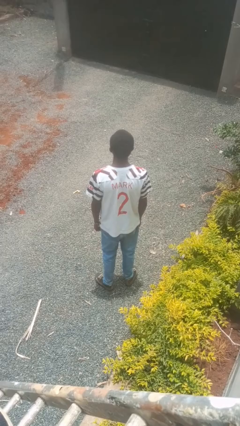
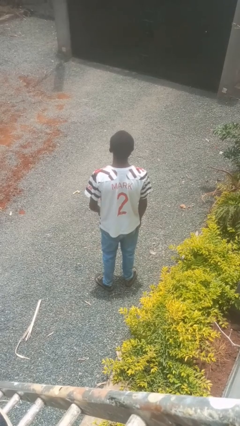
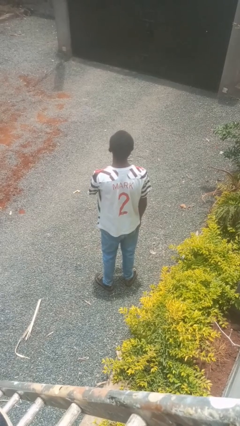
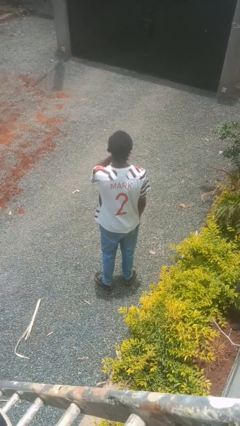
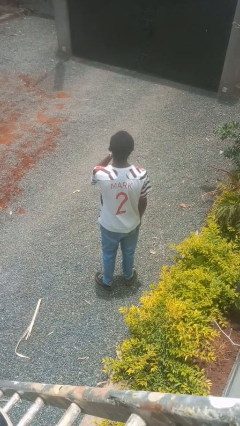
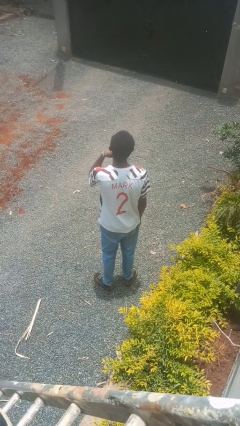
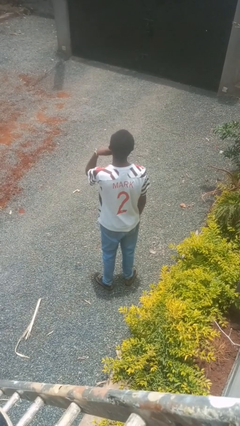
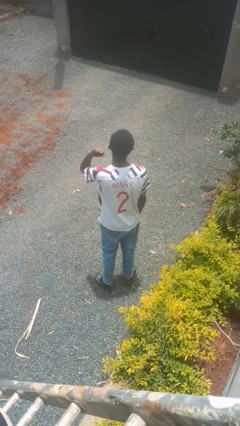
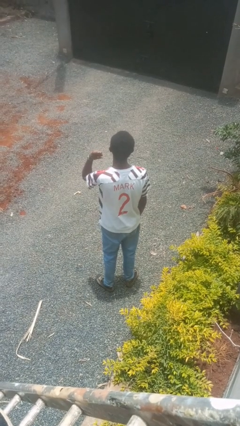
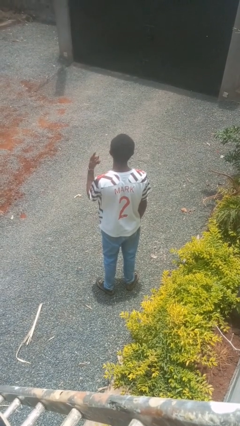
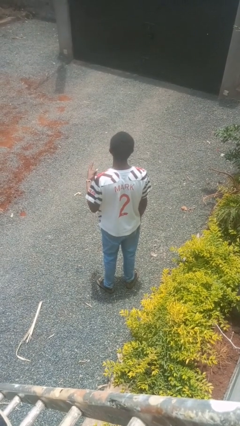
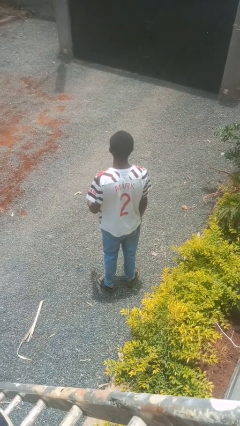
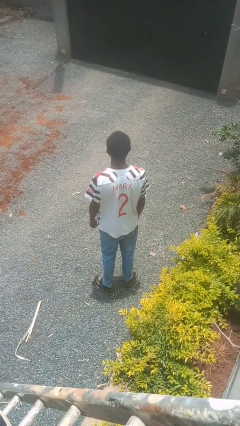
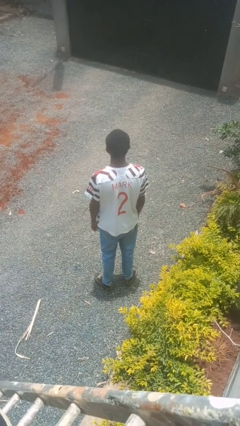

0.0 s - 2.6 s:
person gestures cut

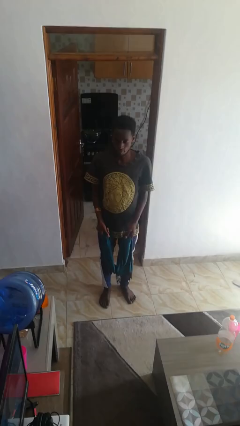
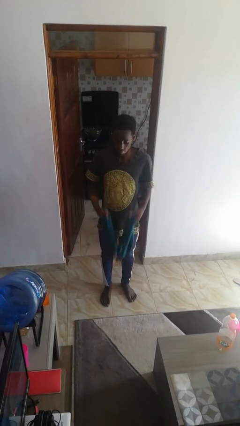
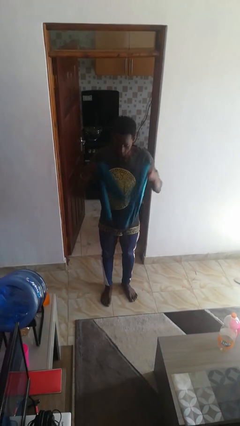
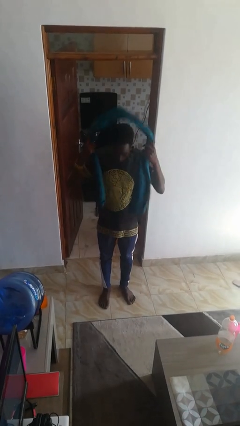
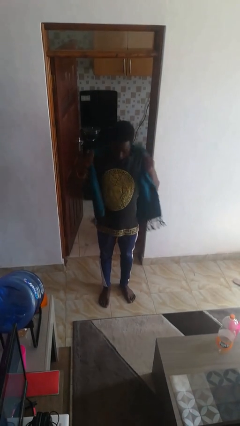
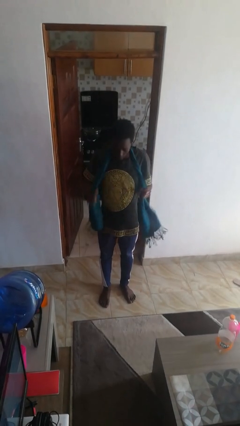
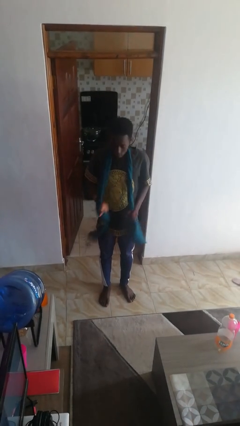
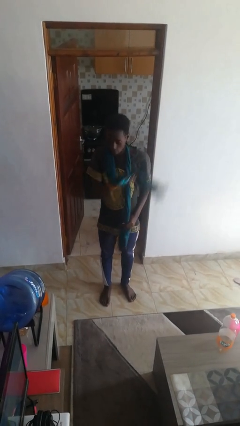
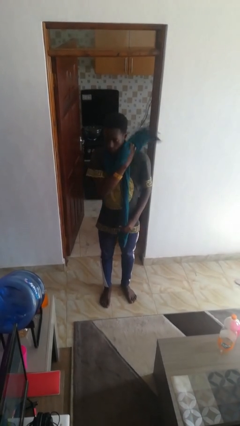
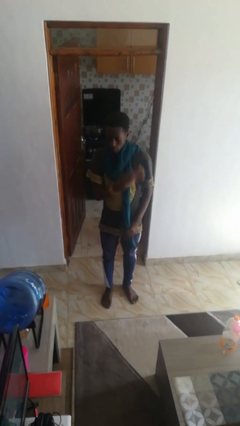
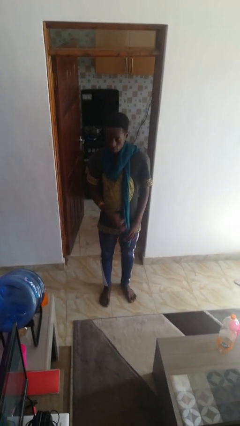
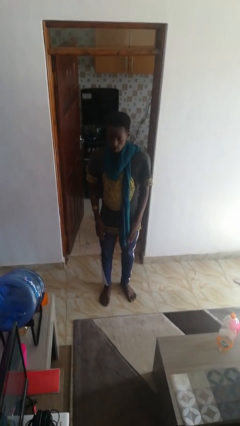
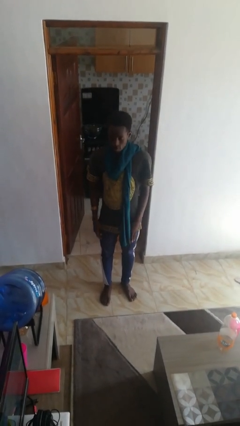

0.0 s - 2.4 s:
person puts on scarf

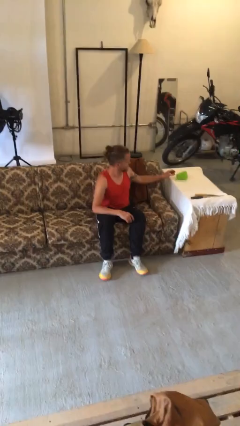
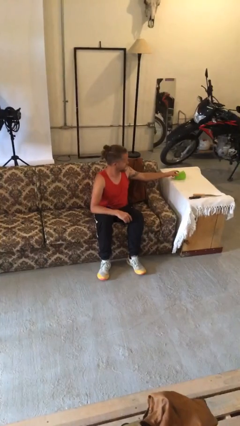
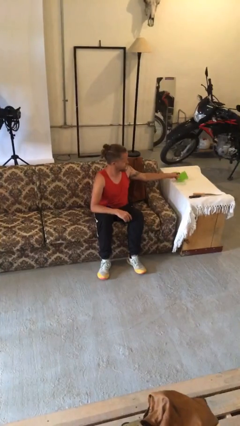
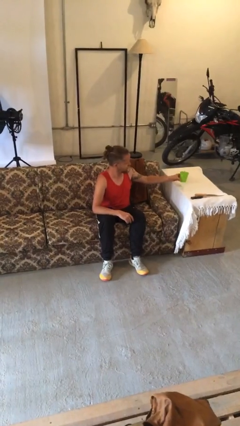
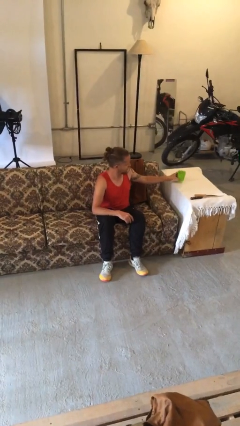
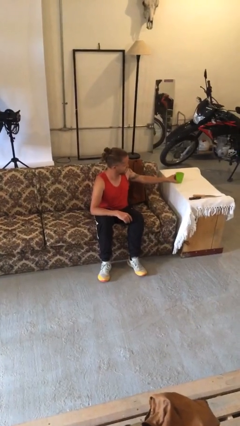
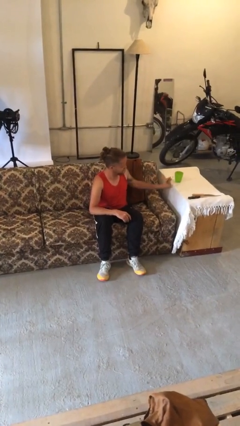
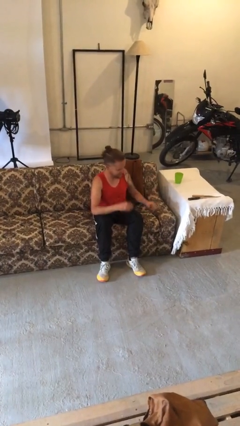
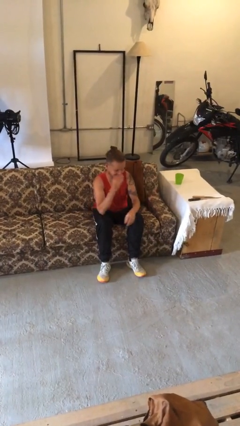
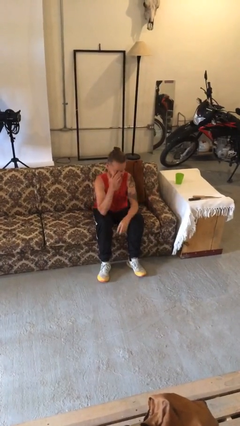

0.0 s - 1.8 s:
person sets upright glass

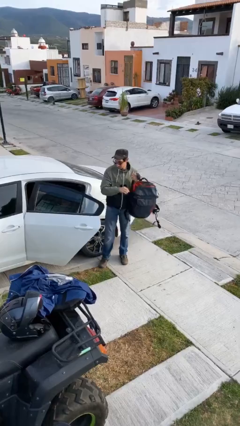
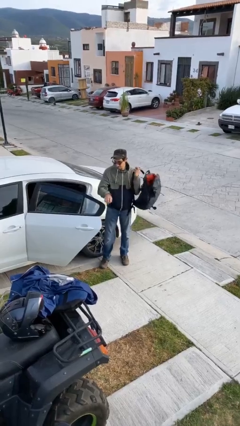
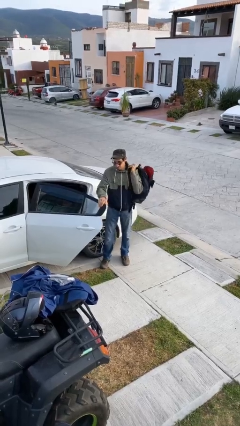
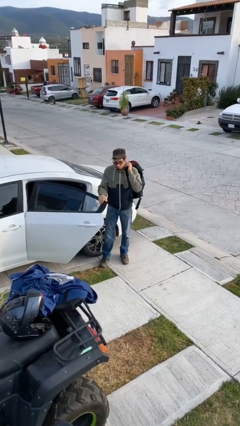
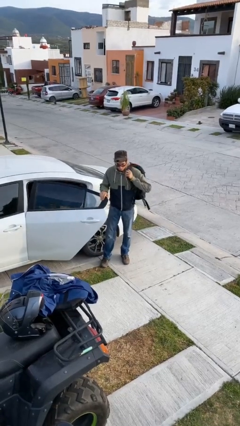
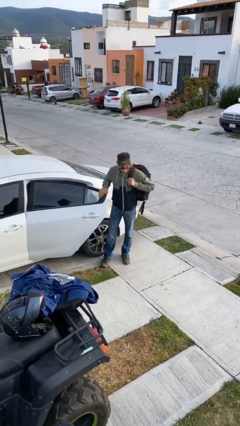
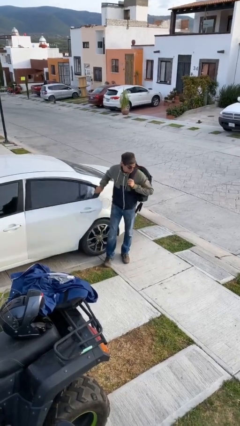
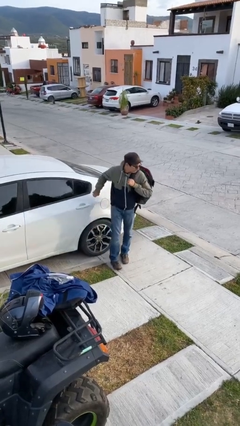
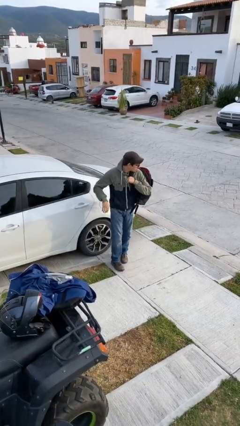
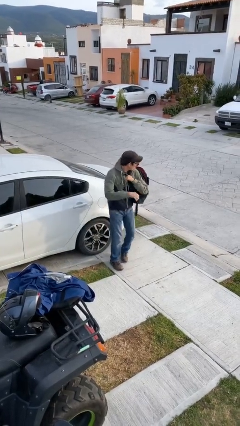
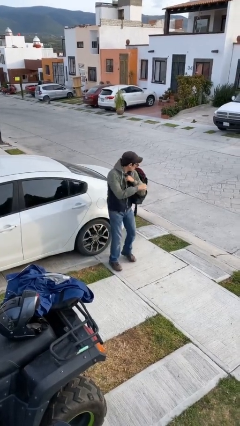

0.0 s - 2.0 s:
person closes car door

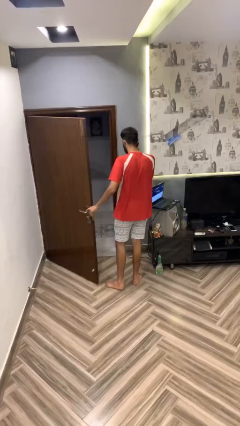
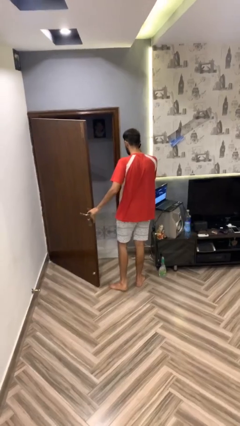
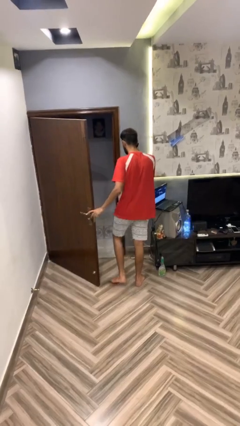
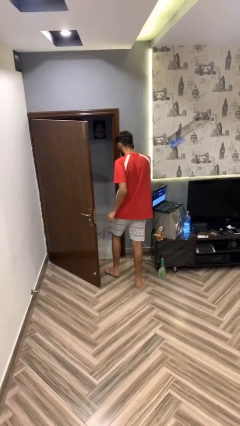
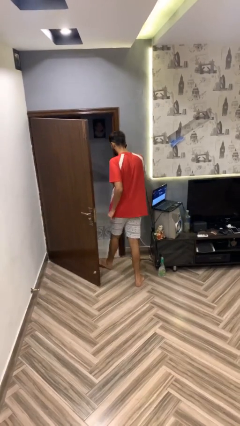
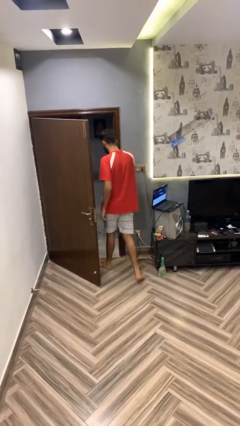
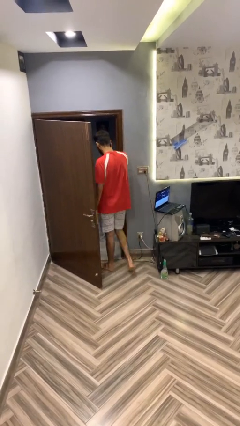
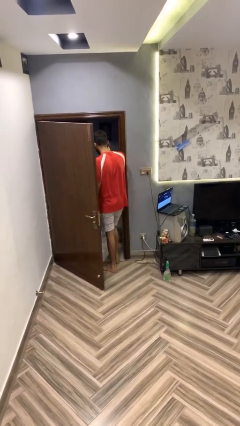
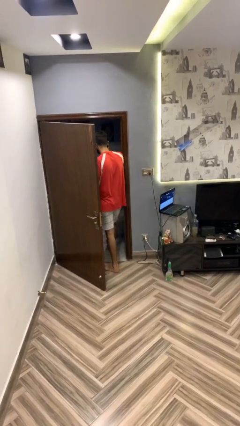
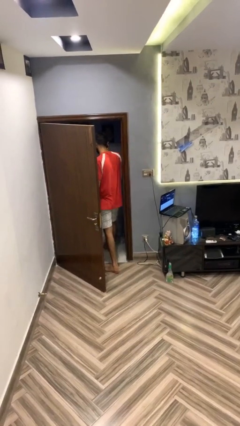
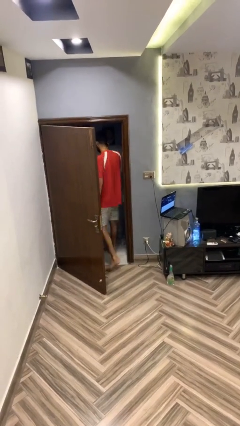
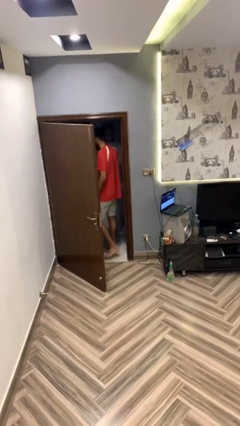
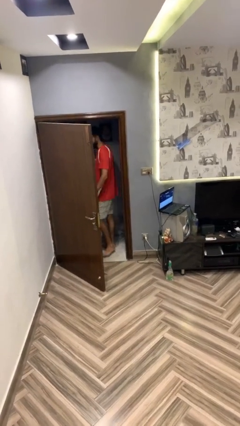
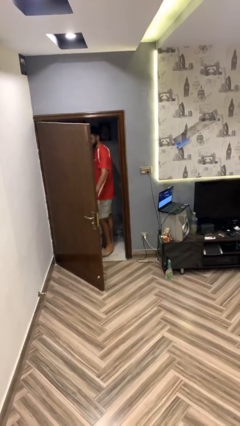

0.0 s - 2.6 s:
person exits scene through structure

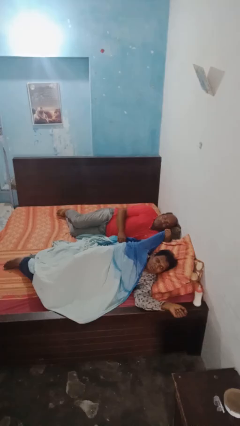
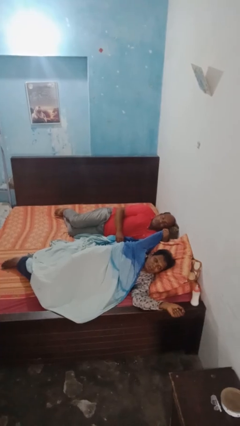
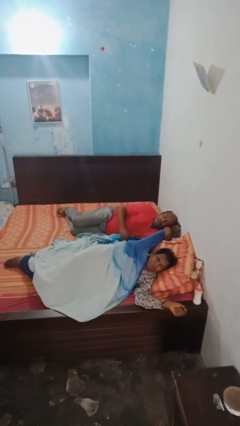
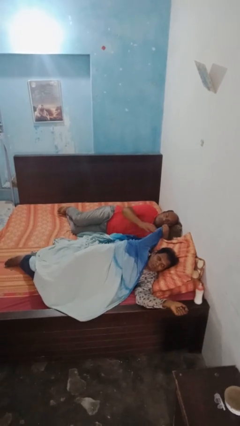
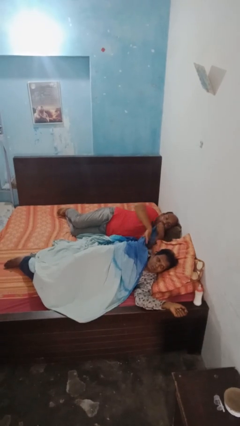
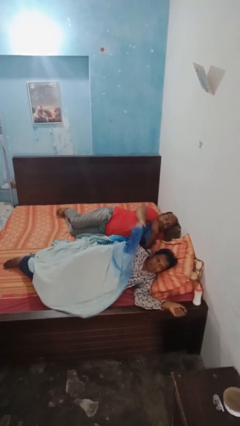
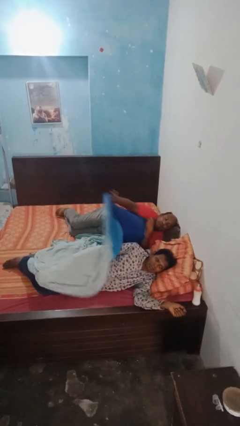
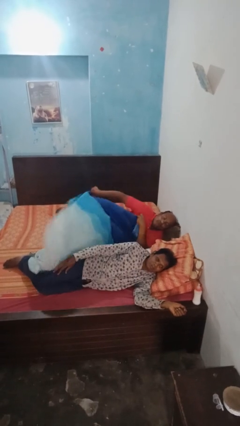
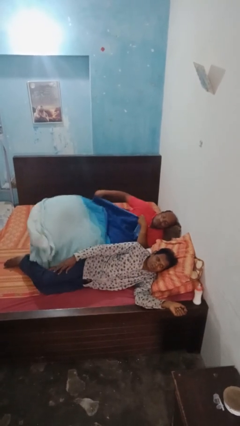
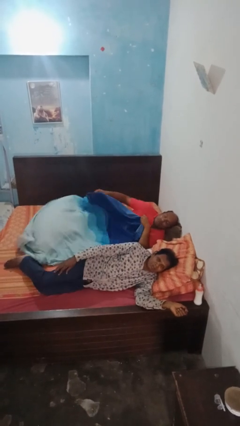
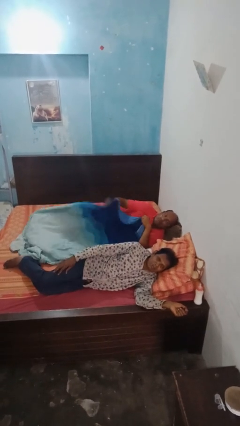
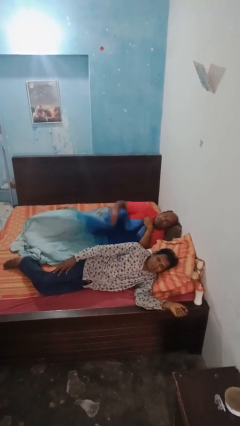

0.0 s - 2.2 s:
person uncovers friend with blanket

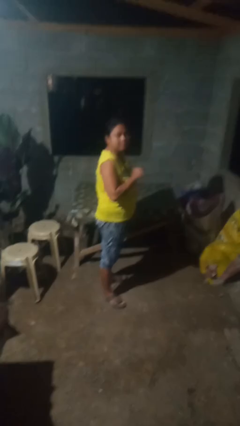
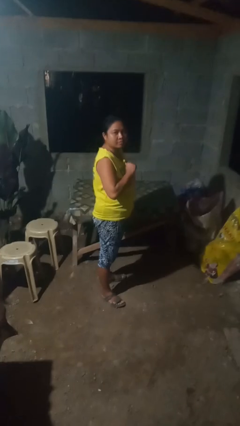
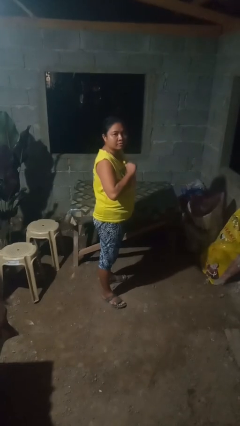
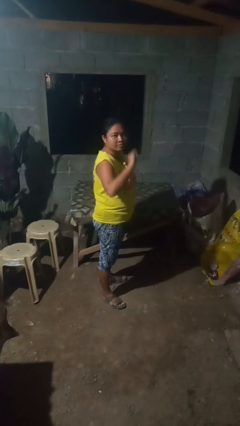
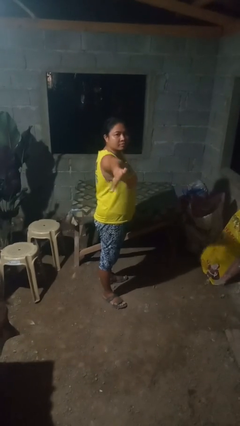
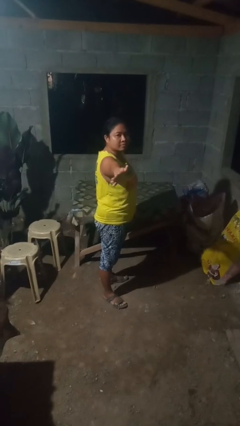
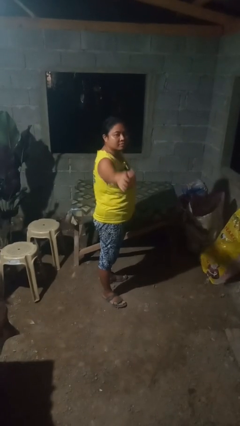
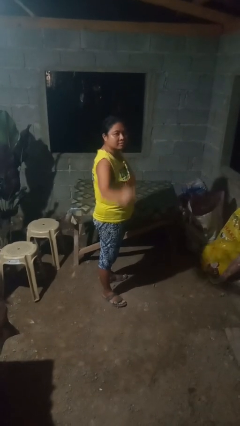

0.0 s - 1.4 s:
person karate chop

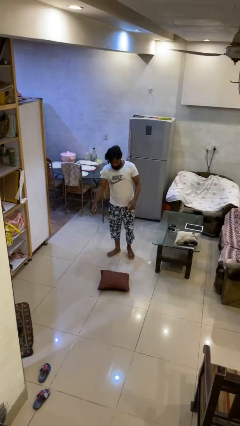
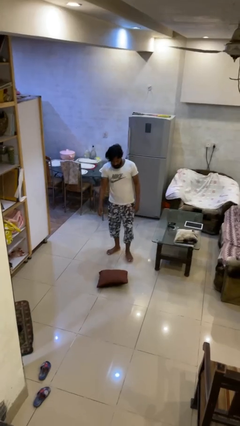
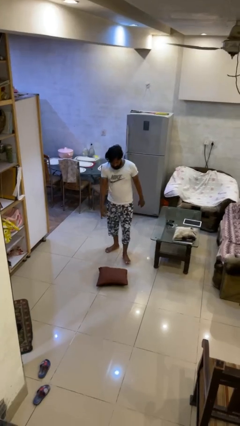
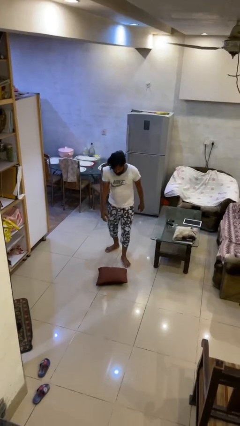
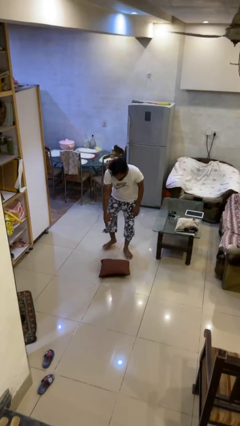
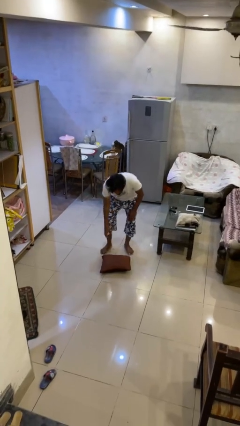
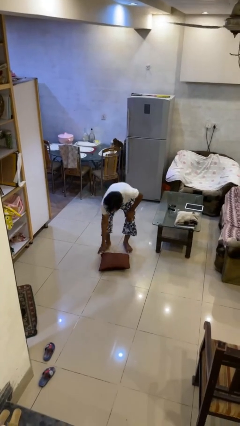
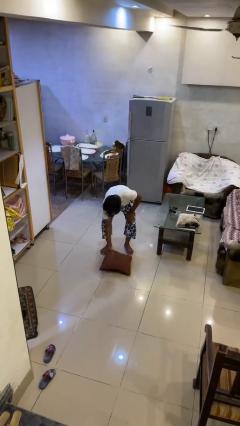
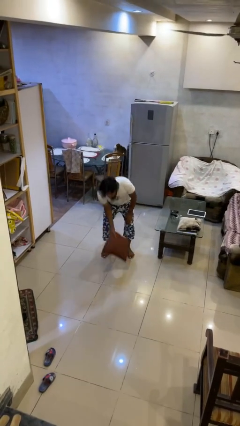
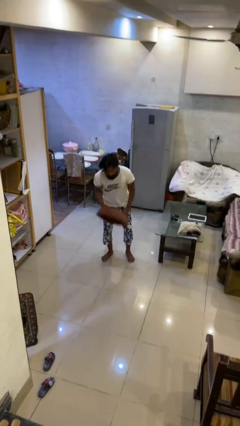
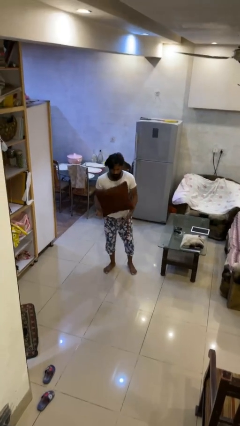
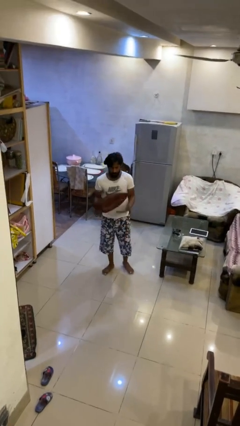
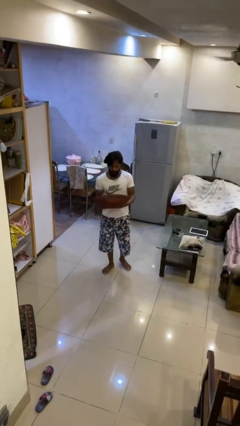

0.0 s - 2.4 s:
person picks up object from floor
